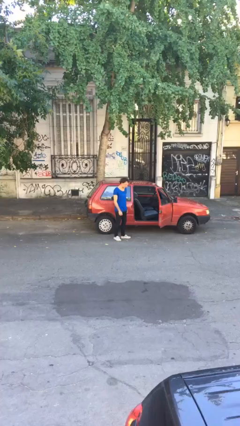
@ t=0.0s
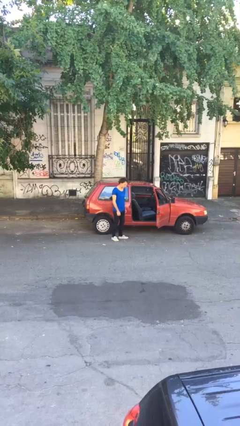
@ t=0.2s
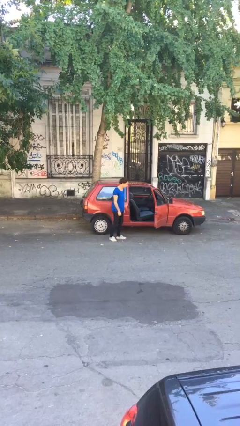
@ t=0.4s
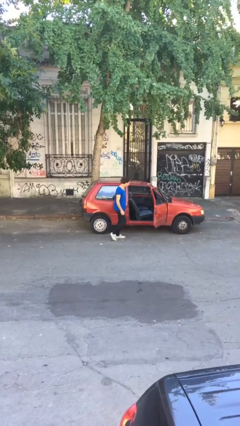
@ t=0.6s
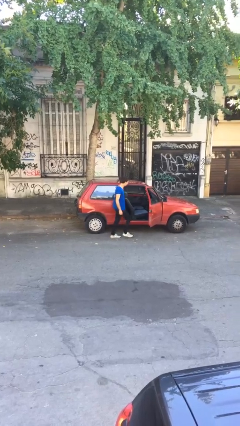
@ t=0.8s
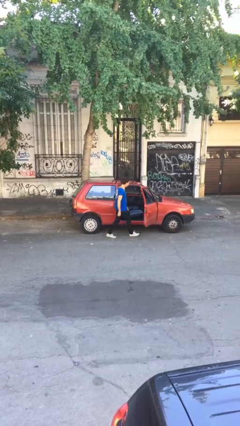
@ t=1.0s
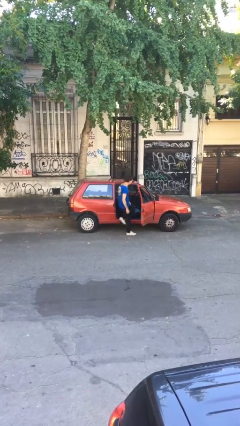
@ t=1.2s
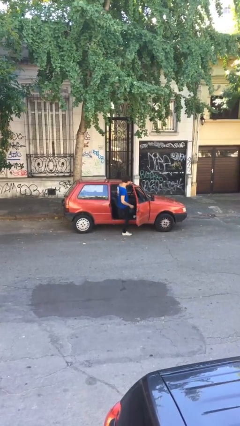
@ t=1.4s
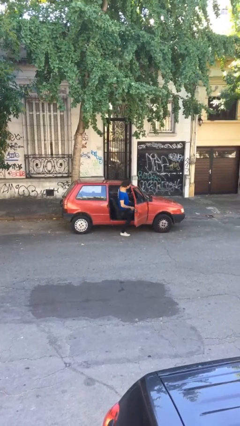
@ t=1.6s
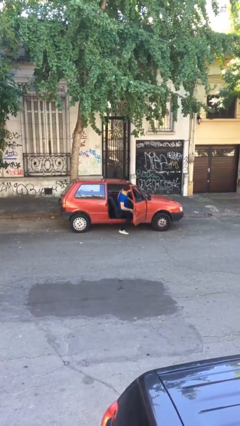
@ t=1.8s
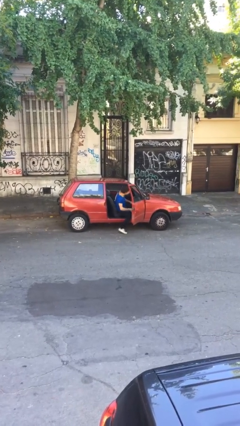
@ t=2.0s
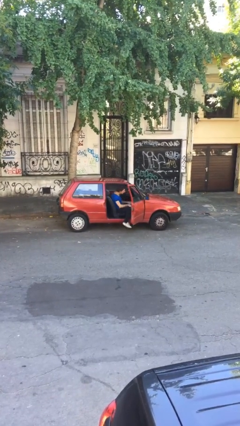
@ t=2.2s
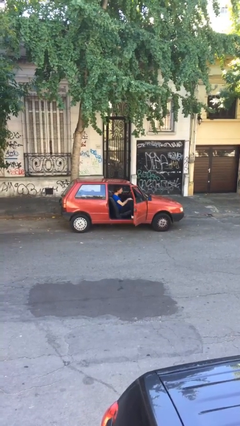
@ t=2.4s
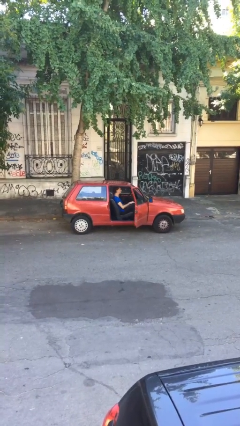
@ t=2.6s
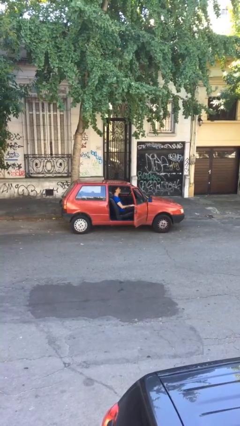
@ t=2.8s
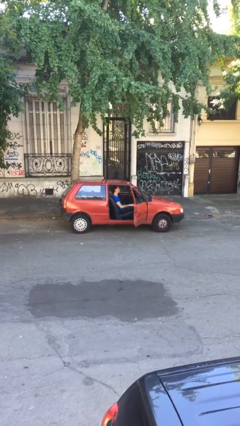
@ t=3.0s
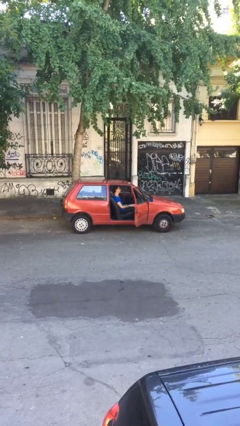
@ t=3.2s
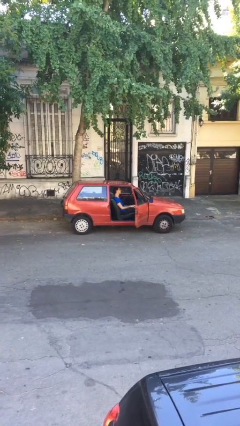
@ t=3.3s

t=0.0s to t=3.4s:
person enters car

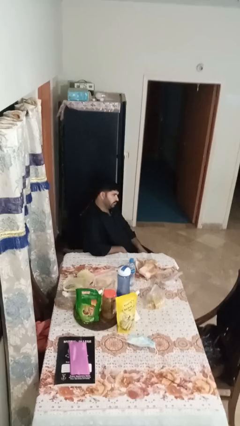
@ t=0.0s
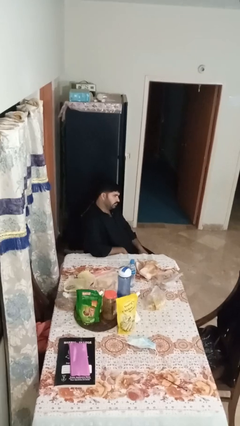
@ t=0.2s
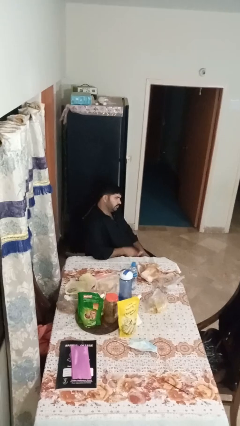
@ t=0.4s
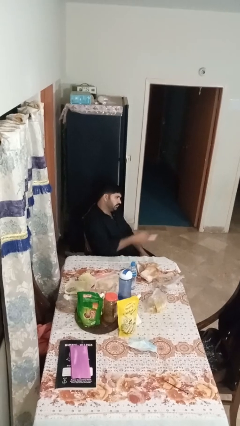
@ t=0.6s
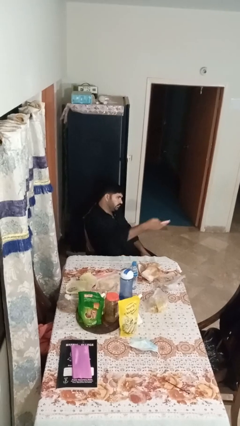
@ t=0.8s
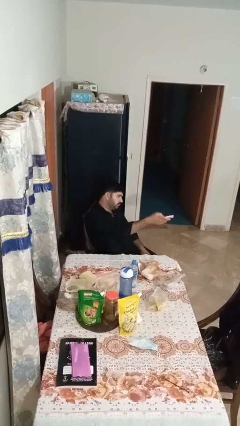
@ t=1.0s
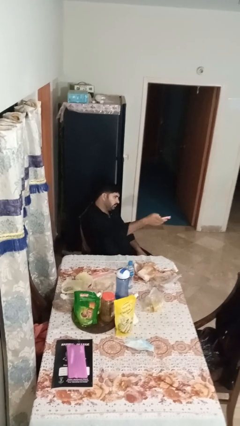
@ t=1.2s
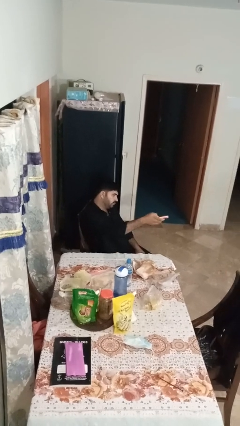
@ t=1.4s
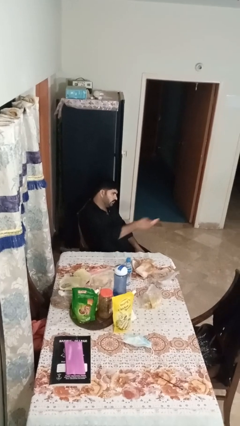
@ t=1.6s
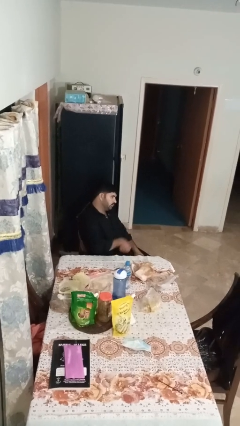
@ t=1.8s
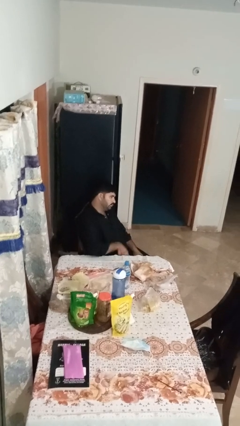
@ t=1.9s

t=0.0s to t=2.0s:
person uses television remote

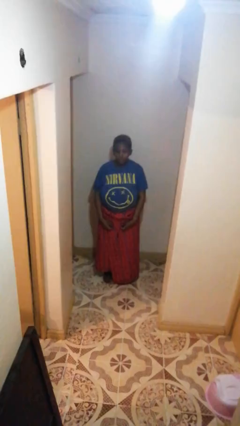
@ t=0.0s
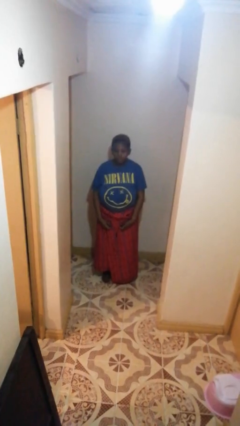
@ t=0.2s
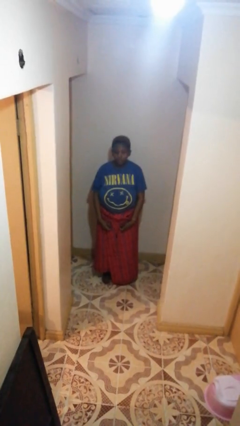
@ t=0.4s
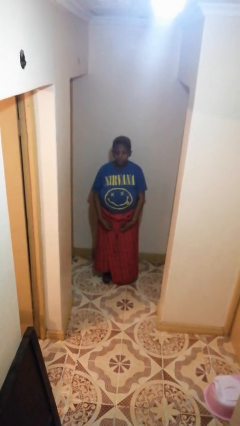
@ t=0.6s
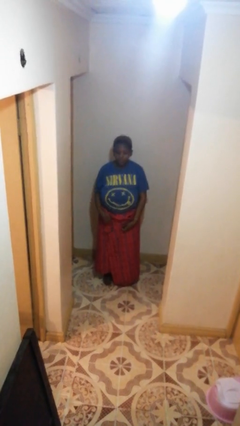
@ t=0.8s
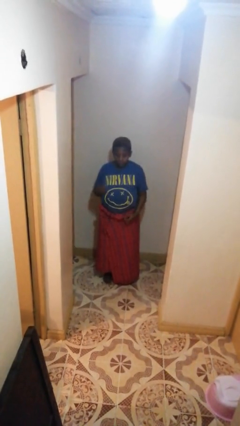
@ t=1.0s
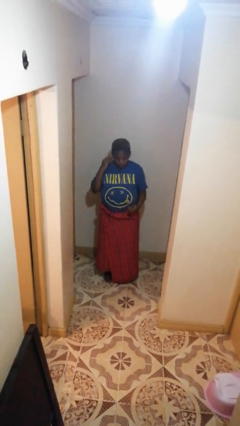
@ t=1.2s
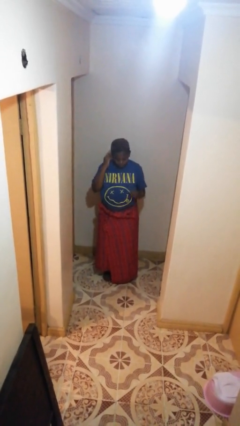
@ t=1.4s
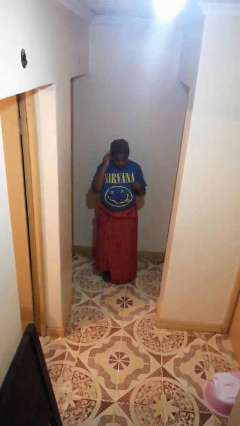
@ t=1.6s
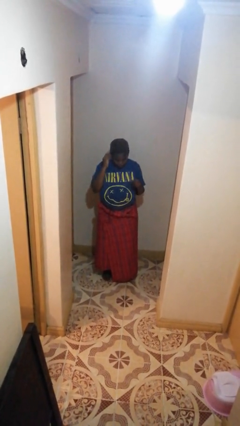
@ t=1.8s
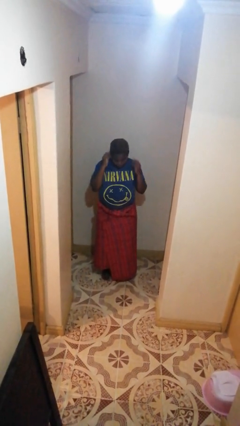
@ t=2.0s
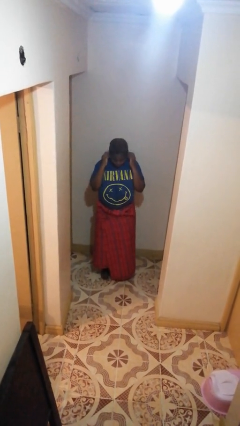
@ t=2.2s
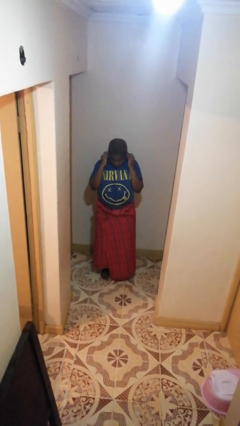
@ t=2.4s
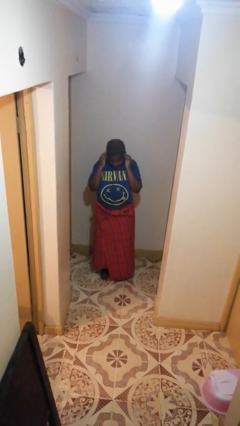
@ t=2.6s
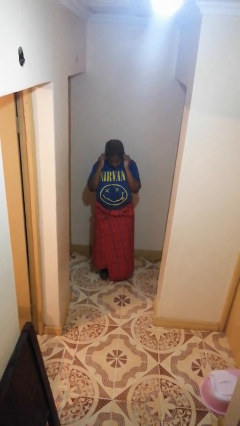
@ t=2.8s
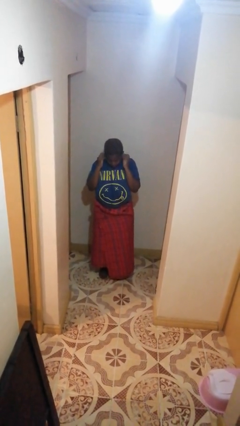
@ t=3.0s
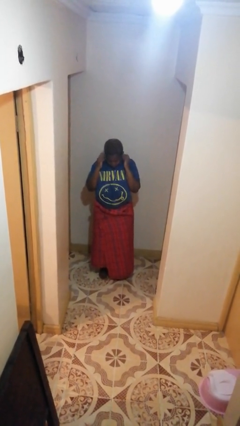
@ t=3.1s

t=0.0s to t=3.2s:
person puts on headphones

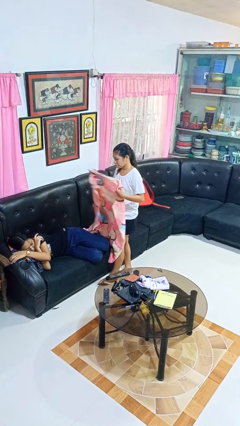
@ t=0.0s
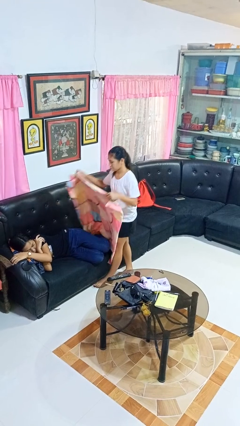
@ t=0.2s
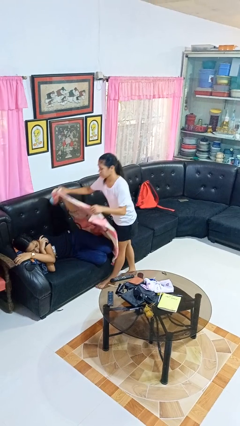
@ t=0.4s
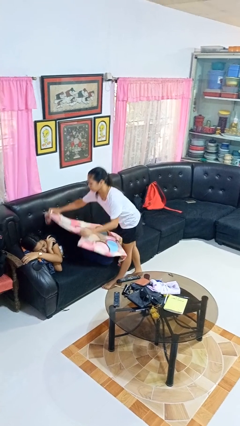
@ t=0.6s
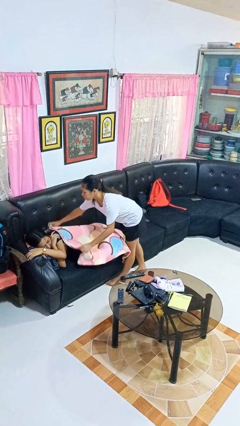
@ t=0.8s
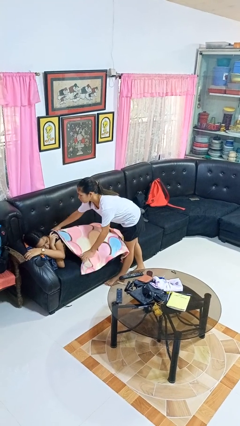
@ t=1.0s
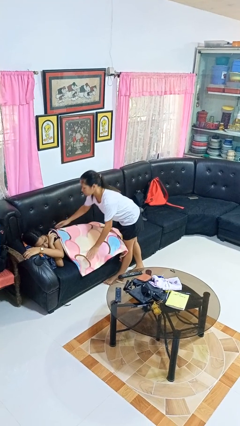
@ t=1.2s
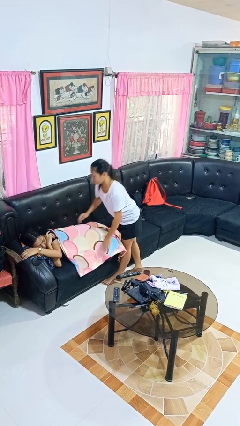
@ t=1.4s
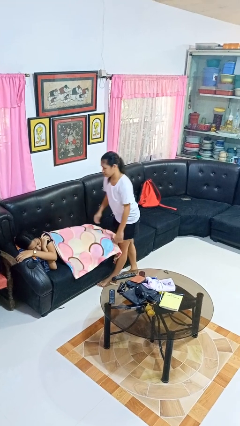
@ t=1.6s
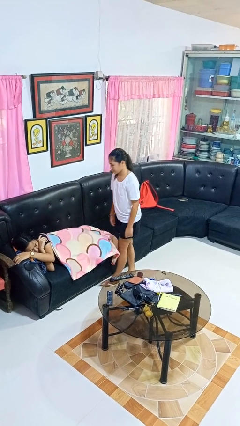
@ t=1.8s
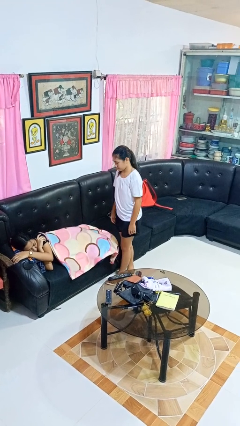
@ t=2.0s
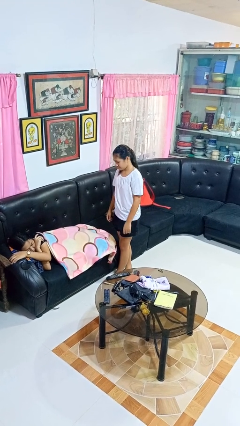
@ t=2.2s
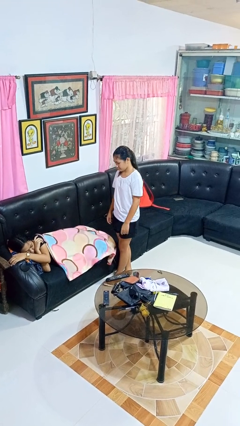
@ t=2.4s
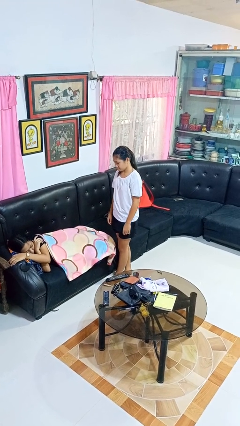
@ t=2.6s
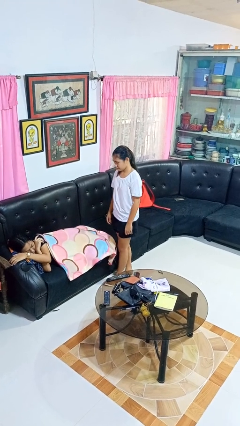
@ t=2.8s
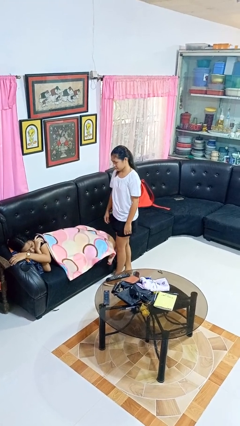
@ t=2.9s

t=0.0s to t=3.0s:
person covers friend with blanket

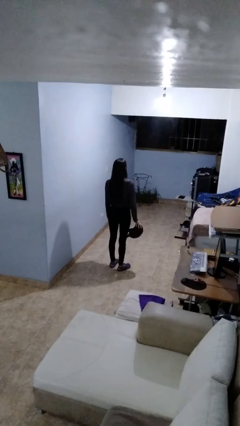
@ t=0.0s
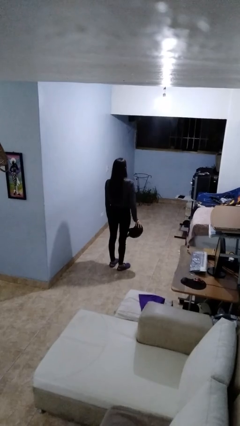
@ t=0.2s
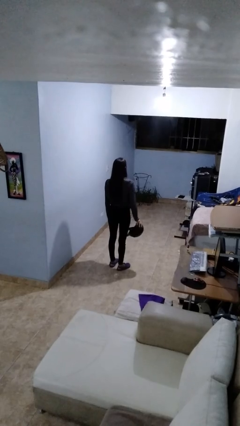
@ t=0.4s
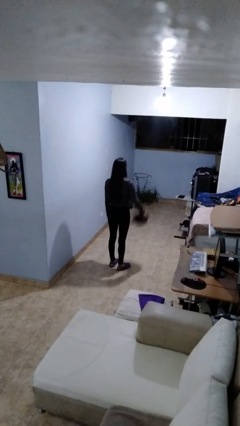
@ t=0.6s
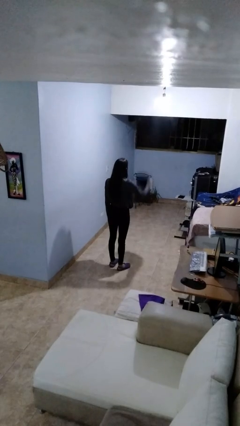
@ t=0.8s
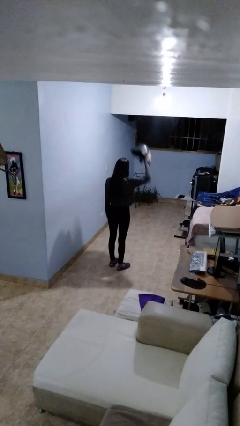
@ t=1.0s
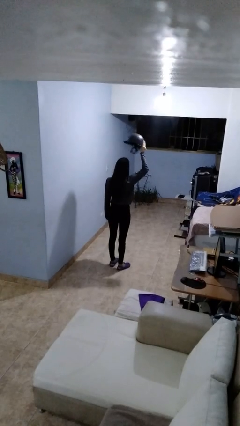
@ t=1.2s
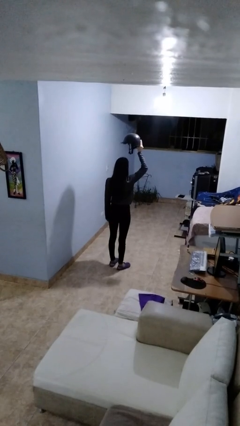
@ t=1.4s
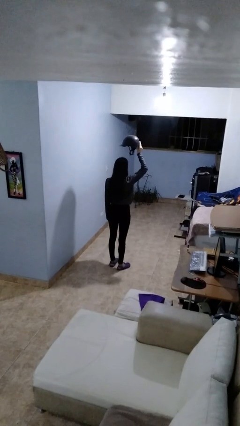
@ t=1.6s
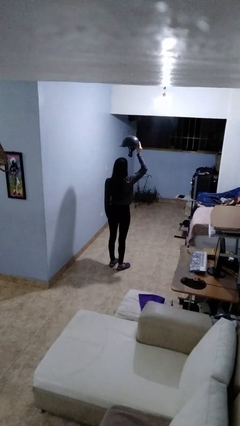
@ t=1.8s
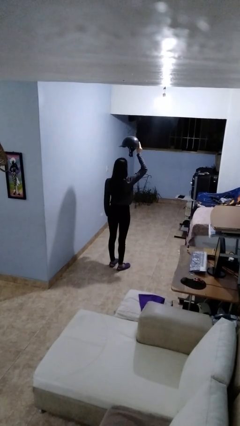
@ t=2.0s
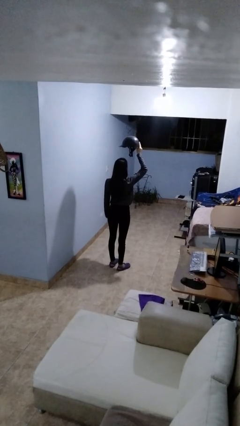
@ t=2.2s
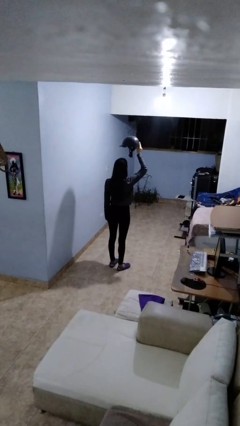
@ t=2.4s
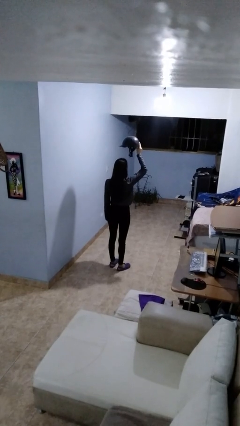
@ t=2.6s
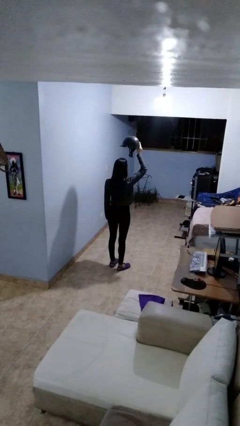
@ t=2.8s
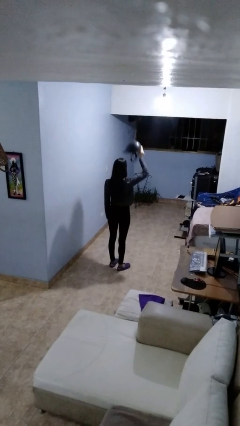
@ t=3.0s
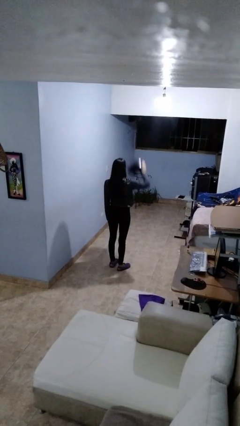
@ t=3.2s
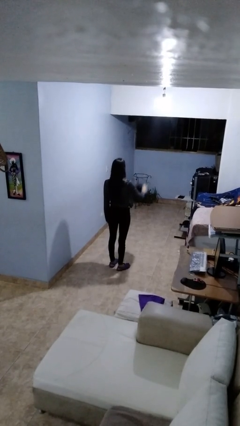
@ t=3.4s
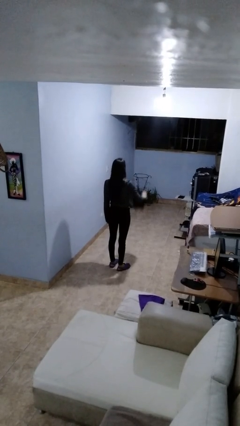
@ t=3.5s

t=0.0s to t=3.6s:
person holds object above head

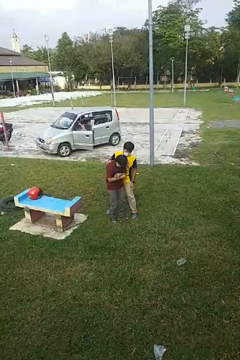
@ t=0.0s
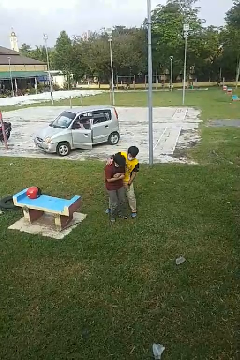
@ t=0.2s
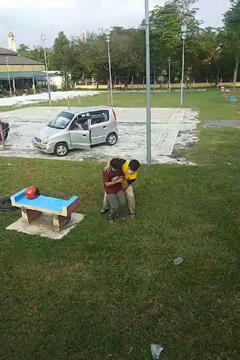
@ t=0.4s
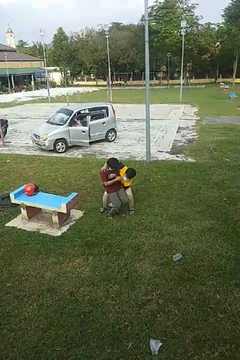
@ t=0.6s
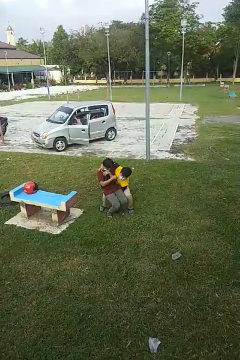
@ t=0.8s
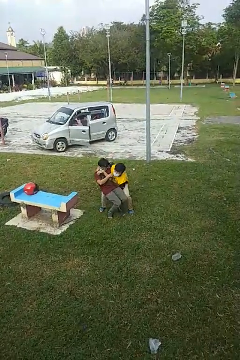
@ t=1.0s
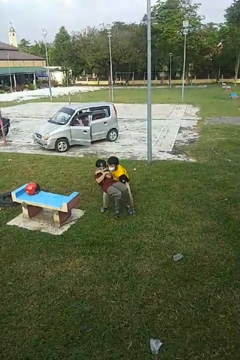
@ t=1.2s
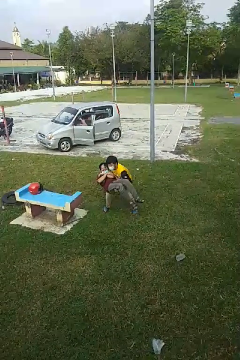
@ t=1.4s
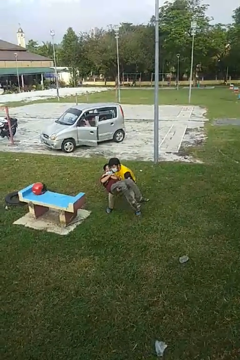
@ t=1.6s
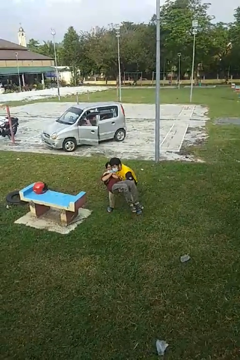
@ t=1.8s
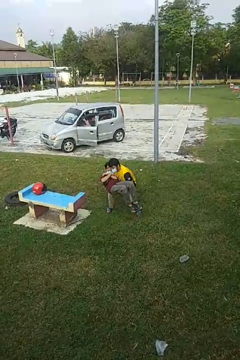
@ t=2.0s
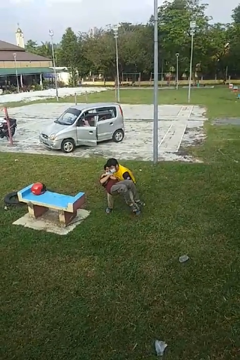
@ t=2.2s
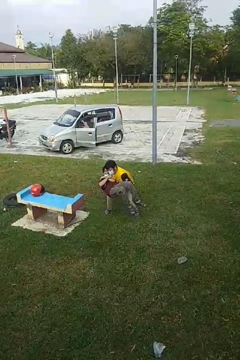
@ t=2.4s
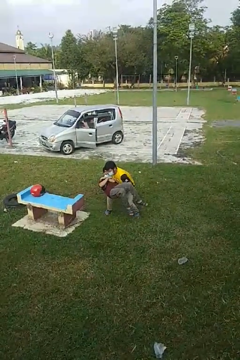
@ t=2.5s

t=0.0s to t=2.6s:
person picks up person
